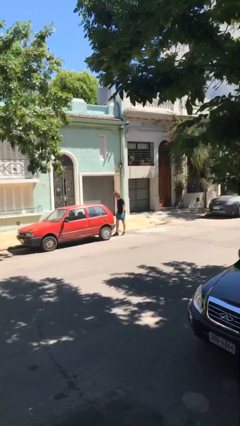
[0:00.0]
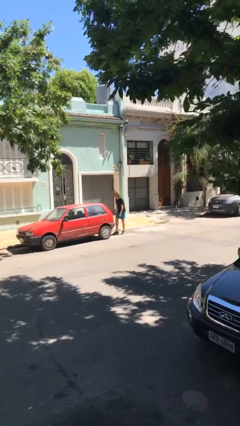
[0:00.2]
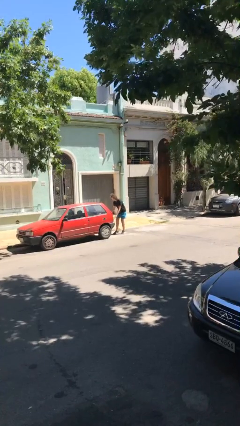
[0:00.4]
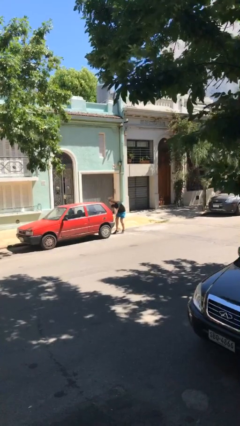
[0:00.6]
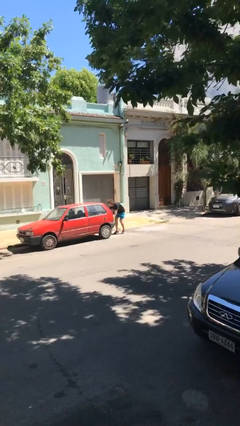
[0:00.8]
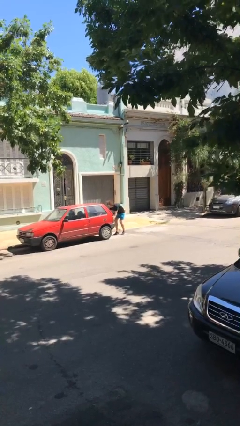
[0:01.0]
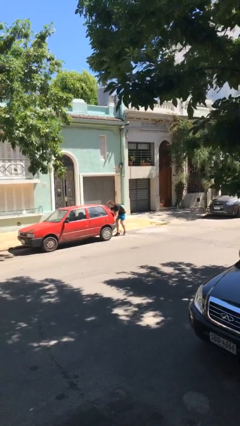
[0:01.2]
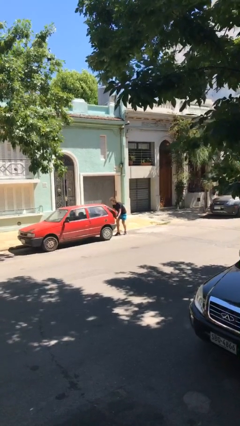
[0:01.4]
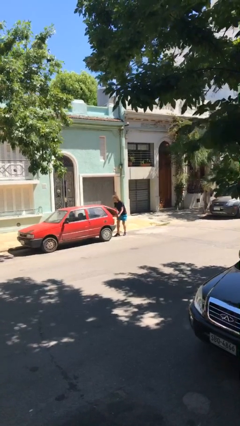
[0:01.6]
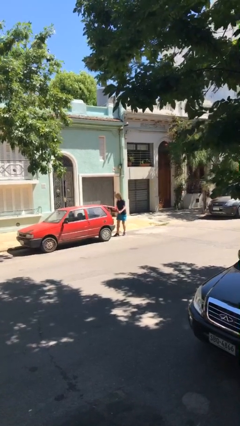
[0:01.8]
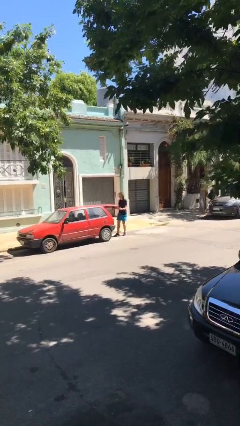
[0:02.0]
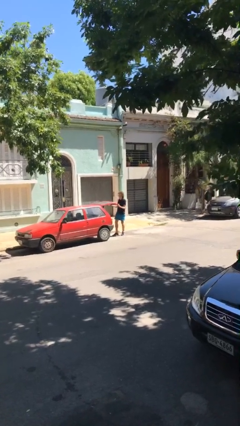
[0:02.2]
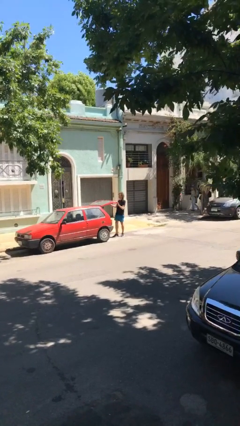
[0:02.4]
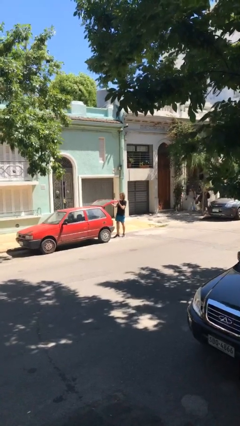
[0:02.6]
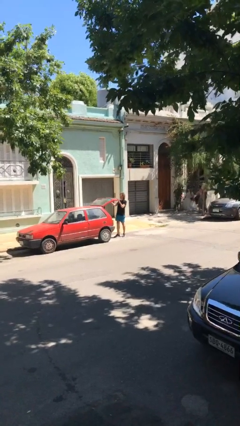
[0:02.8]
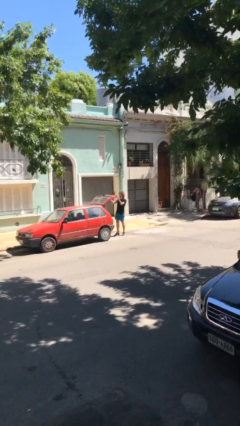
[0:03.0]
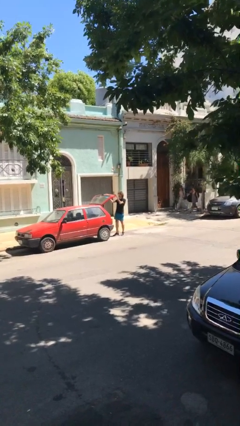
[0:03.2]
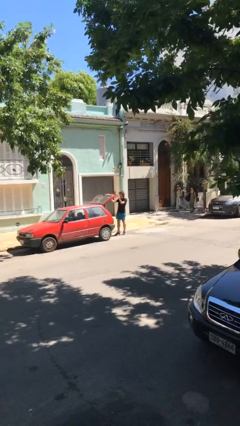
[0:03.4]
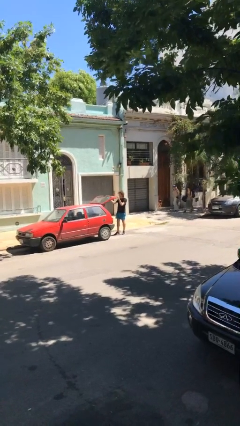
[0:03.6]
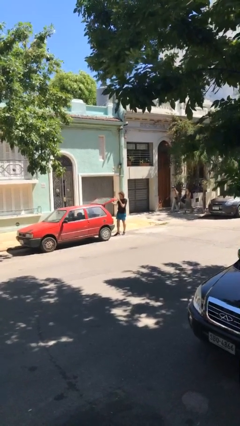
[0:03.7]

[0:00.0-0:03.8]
person opens car trunk

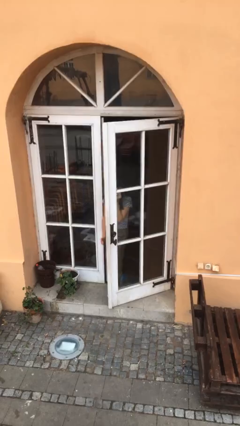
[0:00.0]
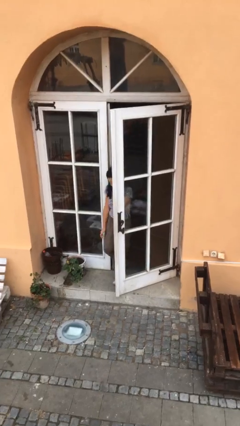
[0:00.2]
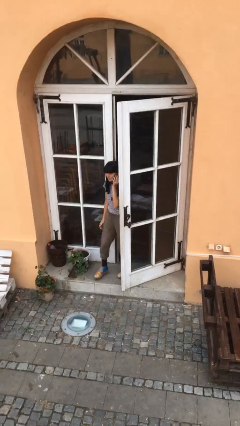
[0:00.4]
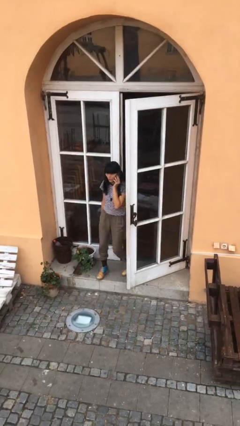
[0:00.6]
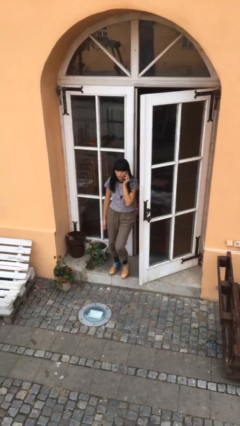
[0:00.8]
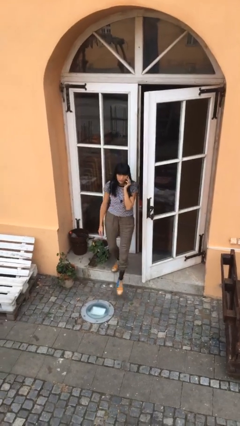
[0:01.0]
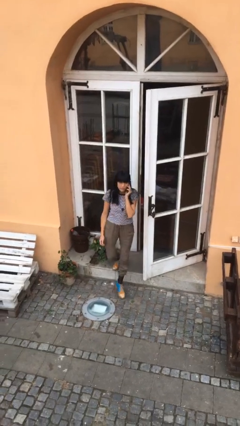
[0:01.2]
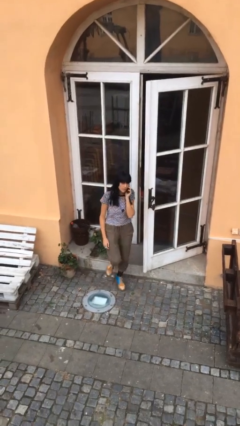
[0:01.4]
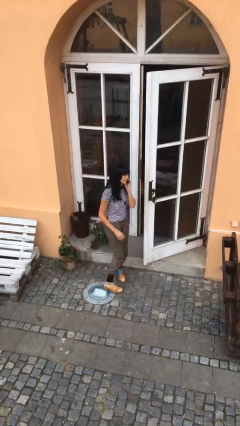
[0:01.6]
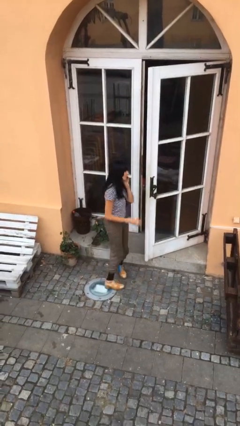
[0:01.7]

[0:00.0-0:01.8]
person enters scene through structure

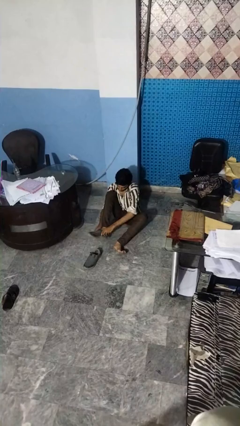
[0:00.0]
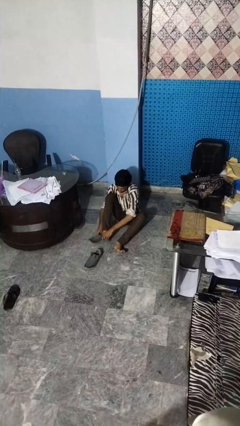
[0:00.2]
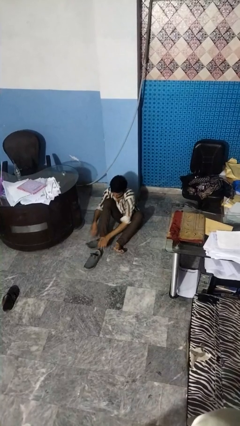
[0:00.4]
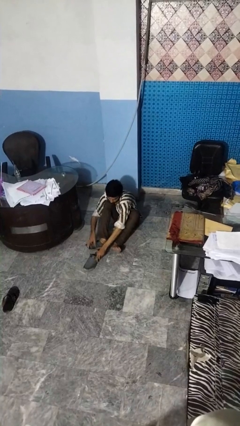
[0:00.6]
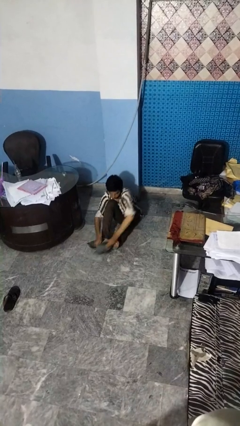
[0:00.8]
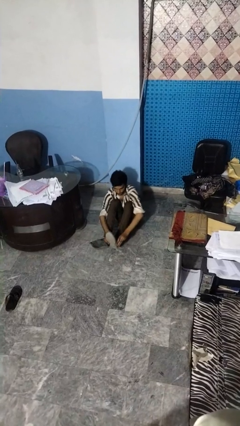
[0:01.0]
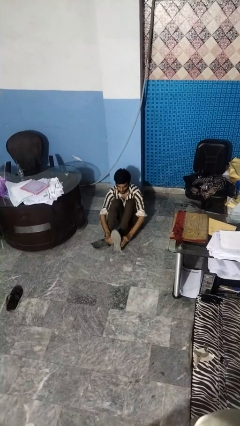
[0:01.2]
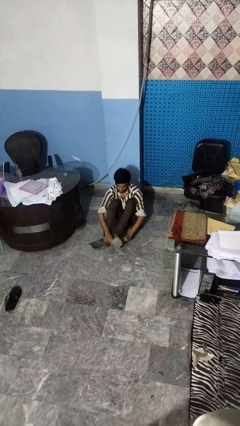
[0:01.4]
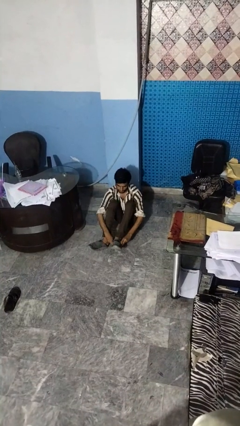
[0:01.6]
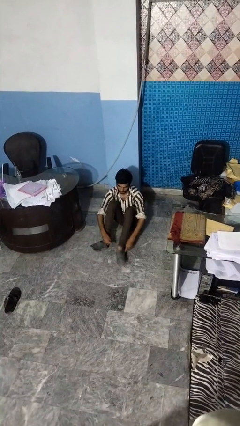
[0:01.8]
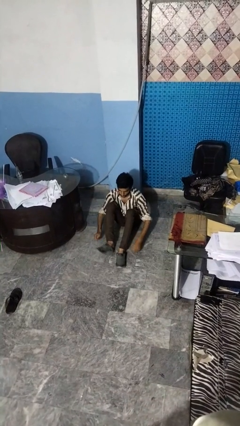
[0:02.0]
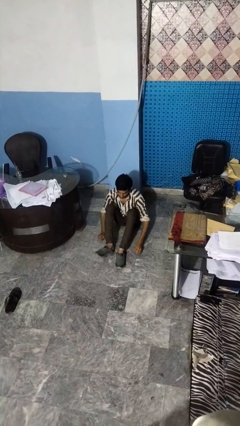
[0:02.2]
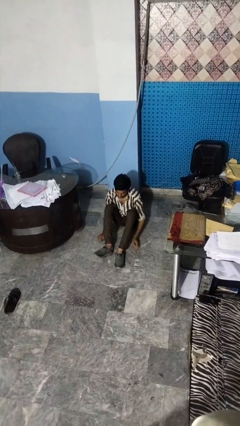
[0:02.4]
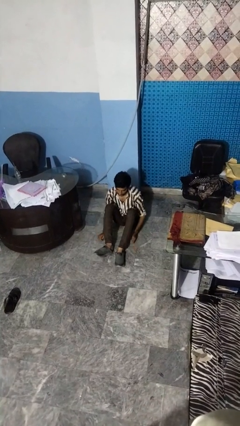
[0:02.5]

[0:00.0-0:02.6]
person puts on shoes

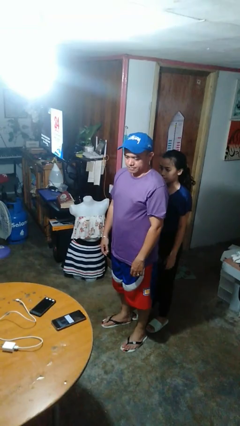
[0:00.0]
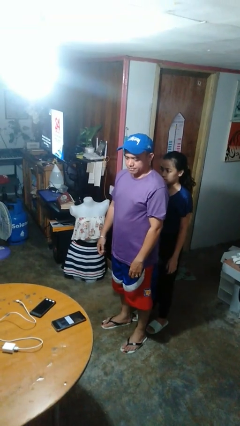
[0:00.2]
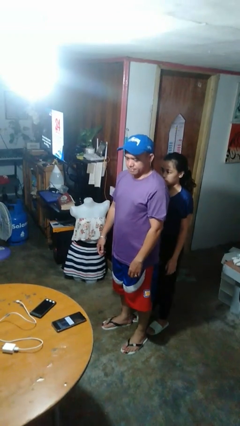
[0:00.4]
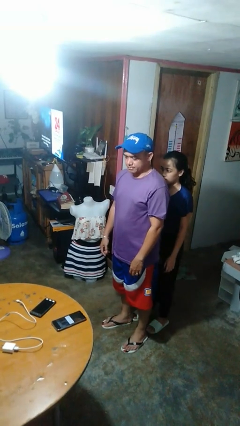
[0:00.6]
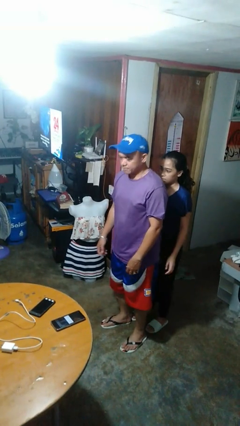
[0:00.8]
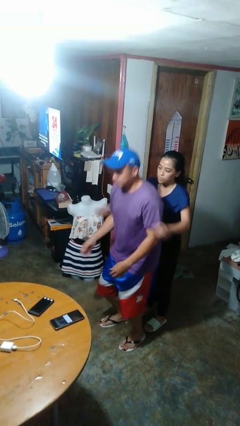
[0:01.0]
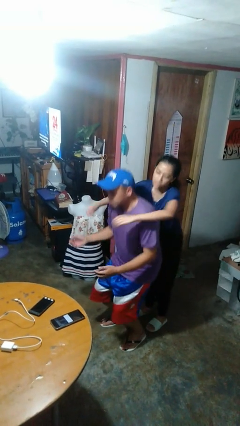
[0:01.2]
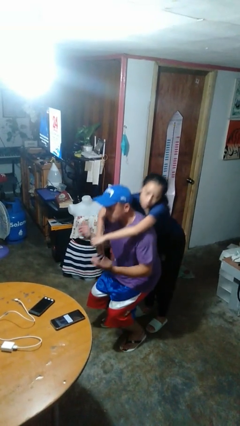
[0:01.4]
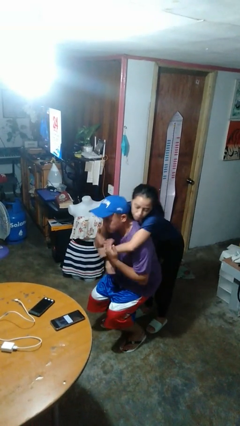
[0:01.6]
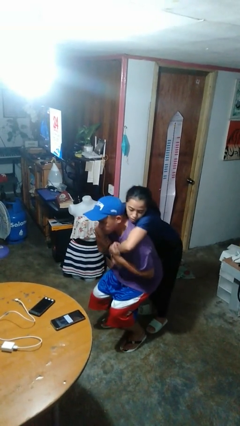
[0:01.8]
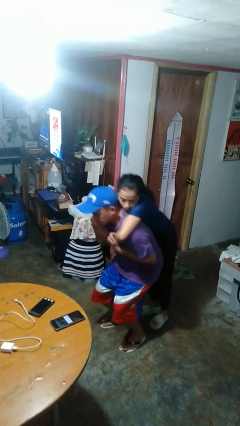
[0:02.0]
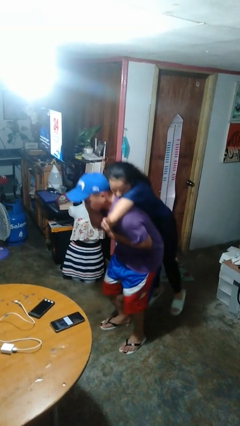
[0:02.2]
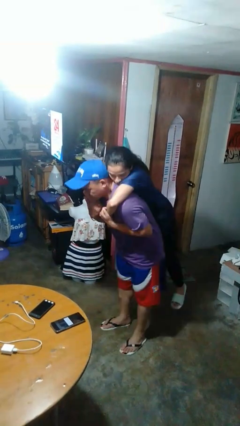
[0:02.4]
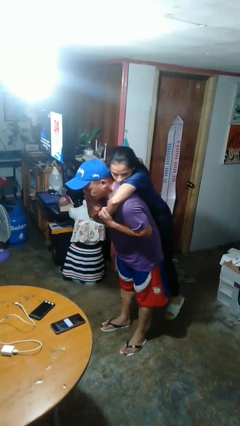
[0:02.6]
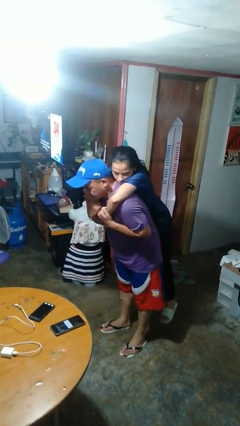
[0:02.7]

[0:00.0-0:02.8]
person picks up person

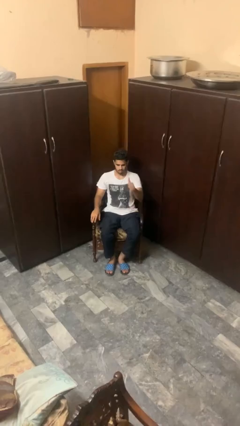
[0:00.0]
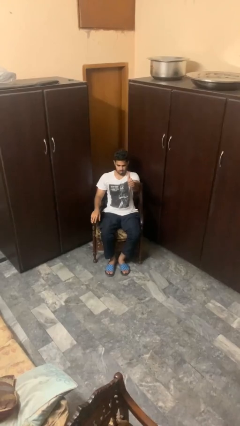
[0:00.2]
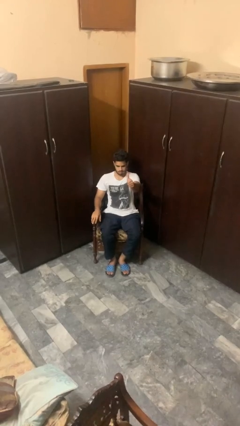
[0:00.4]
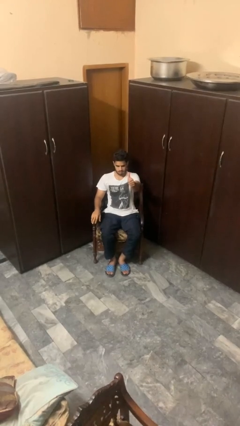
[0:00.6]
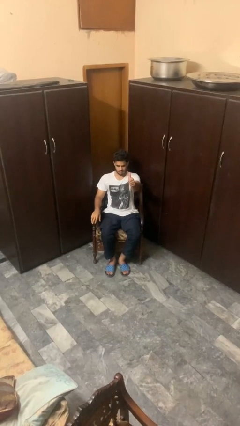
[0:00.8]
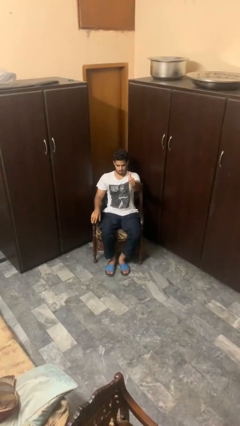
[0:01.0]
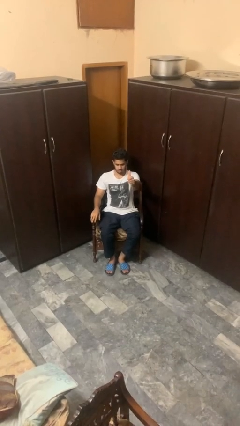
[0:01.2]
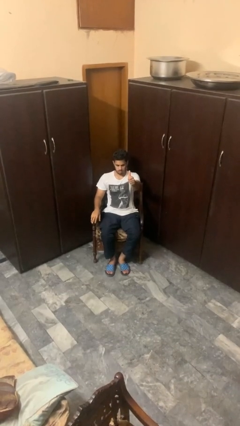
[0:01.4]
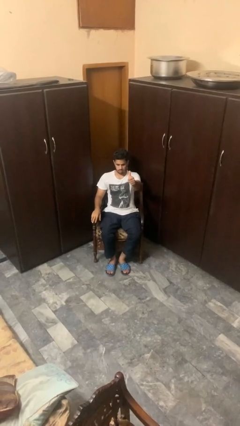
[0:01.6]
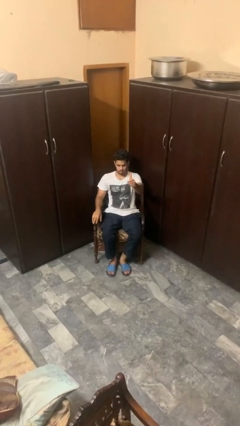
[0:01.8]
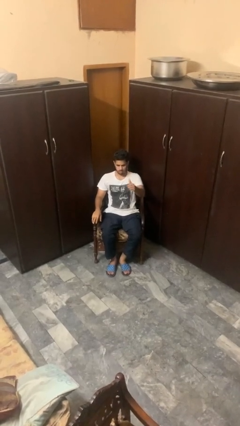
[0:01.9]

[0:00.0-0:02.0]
person gestures thumbs up

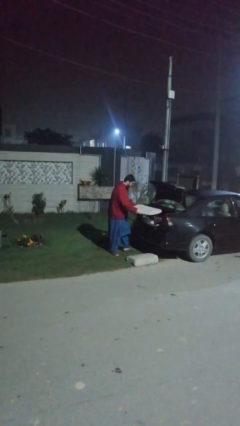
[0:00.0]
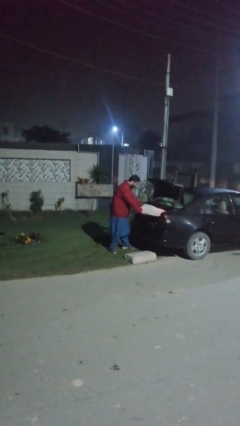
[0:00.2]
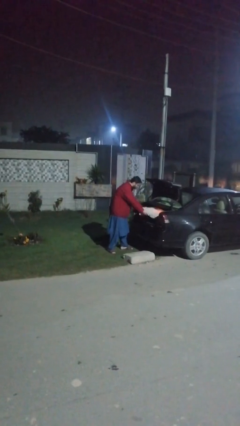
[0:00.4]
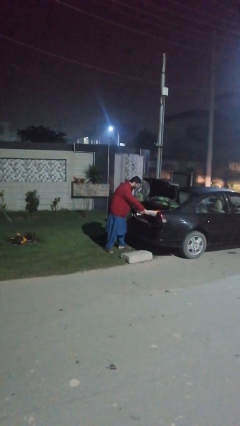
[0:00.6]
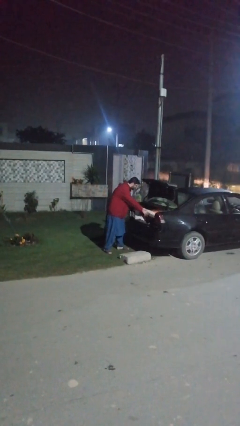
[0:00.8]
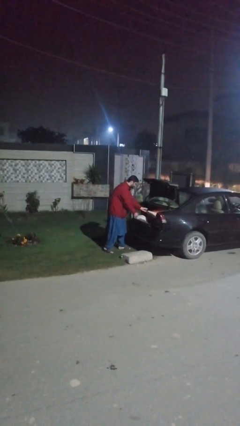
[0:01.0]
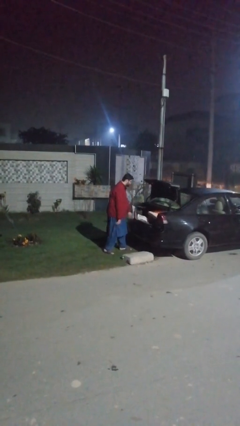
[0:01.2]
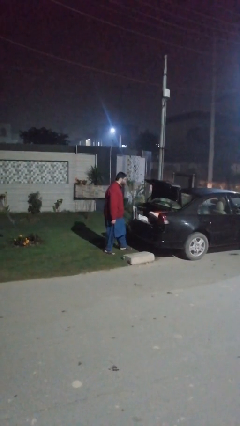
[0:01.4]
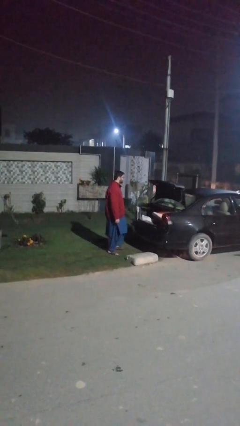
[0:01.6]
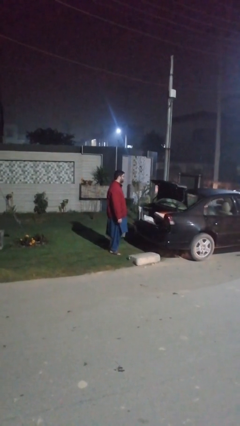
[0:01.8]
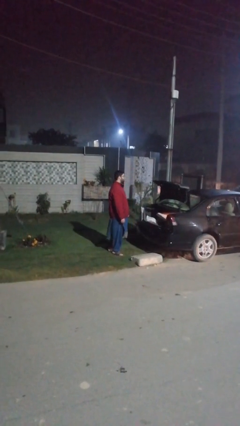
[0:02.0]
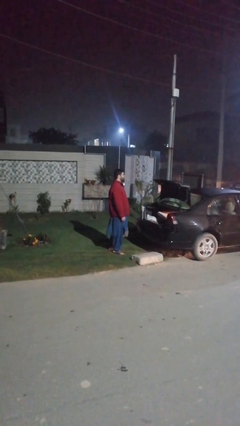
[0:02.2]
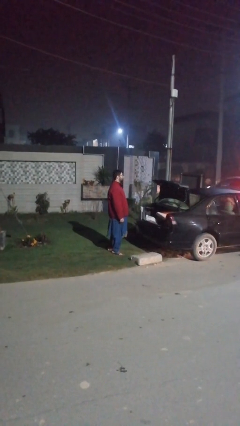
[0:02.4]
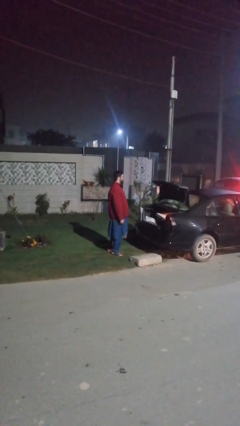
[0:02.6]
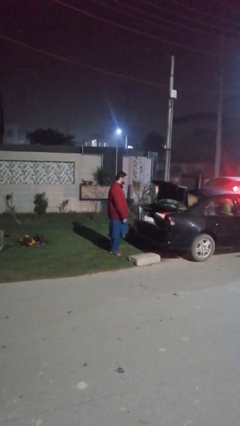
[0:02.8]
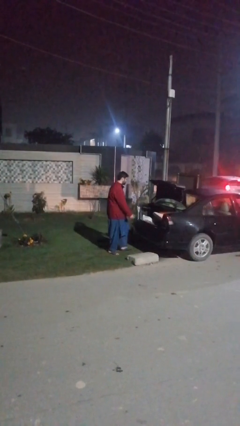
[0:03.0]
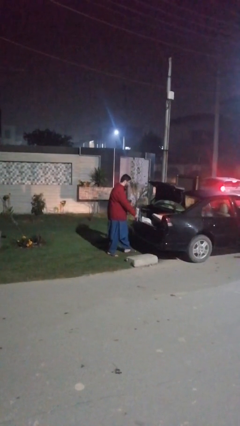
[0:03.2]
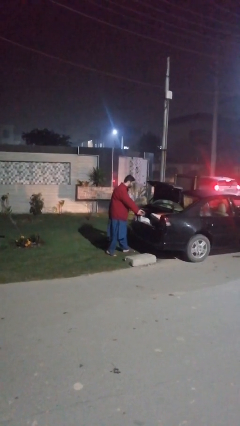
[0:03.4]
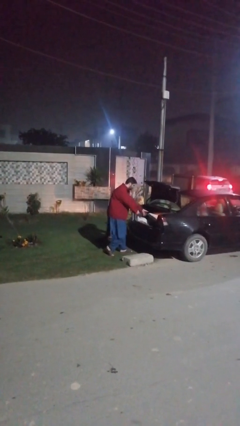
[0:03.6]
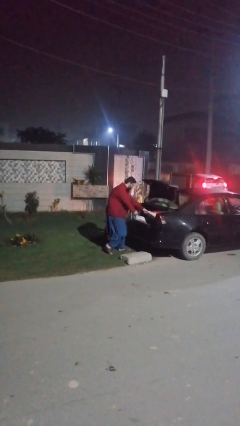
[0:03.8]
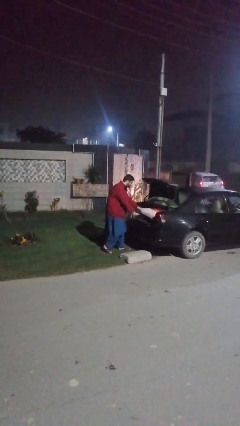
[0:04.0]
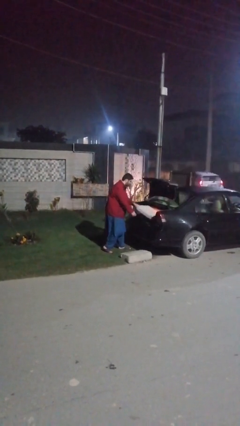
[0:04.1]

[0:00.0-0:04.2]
person loads car
